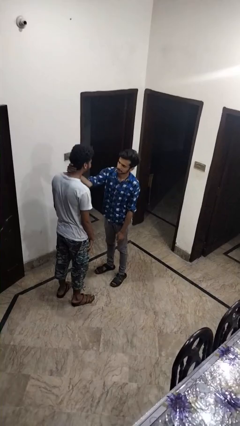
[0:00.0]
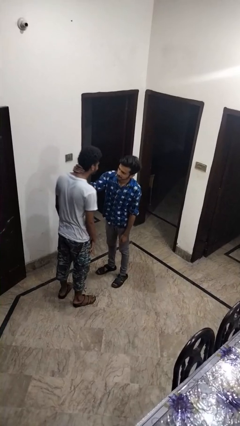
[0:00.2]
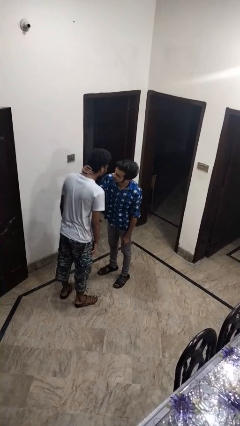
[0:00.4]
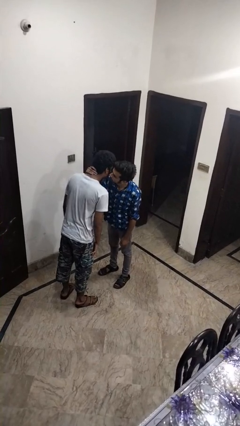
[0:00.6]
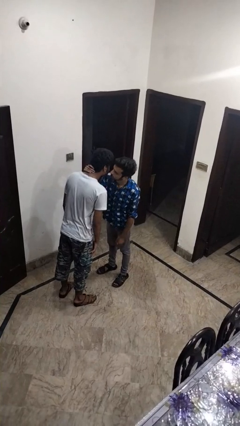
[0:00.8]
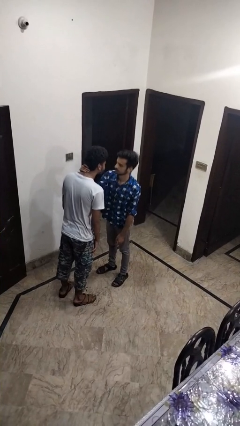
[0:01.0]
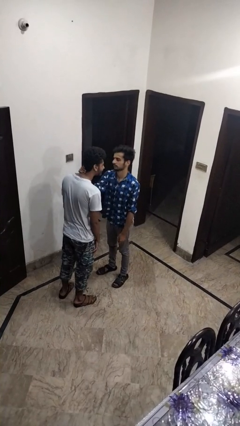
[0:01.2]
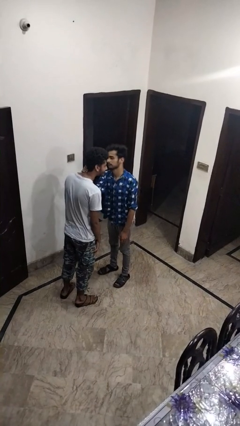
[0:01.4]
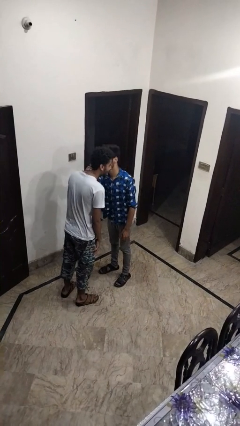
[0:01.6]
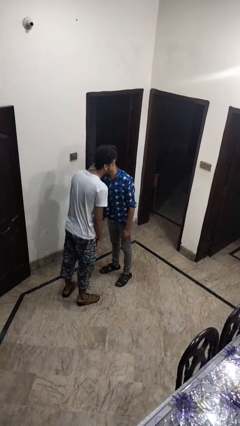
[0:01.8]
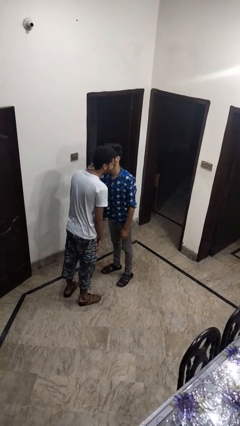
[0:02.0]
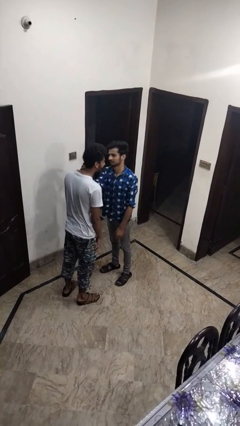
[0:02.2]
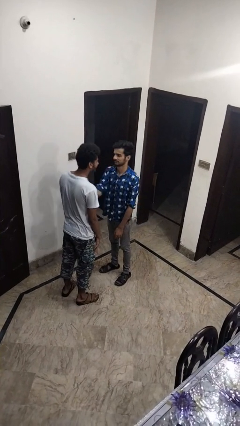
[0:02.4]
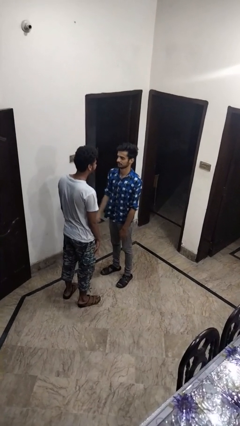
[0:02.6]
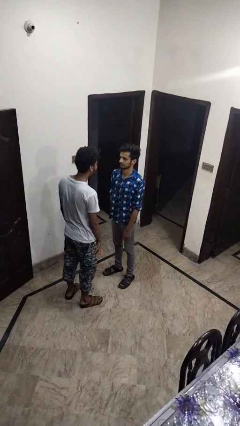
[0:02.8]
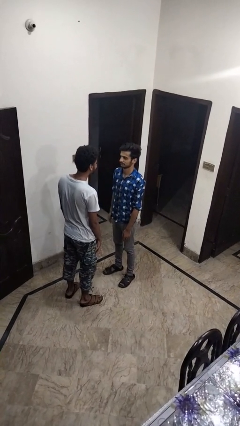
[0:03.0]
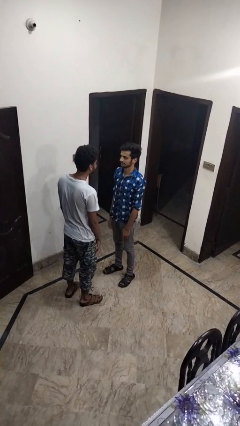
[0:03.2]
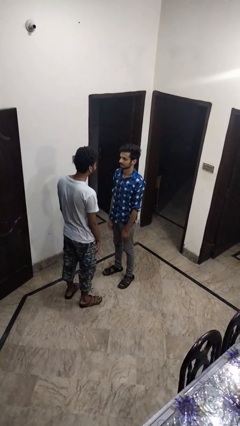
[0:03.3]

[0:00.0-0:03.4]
person kisses cheek of person

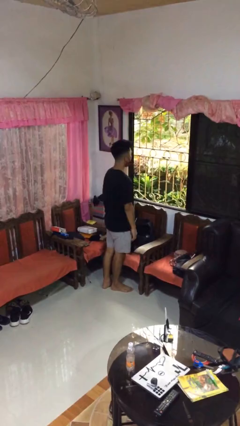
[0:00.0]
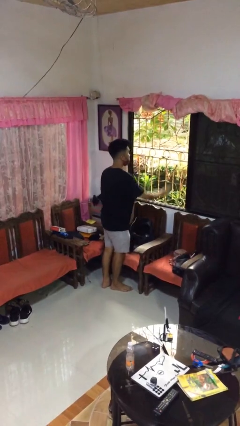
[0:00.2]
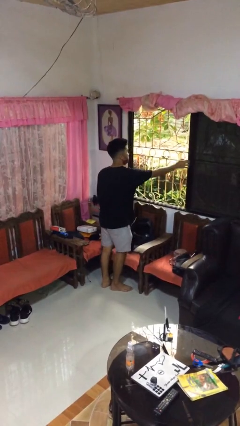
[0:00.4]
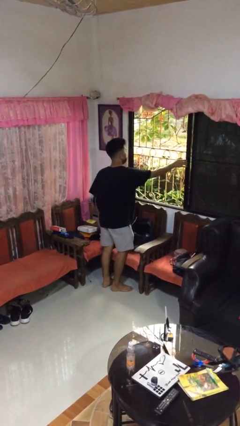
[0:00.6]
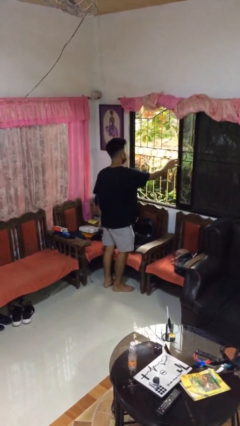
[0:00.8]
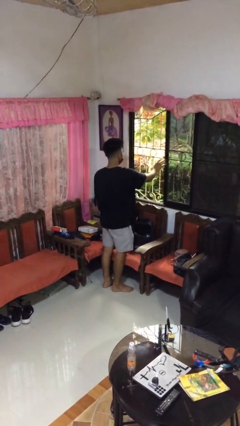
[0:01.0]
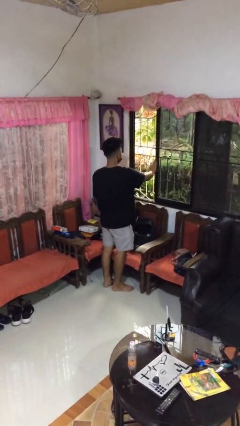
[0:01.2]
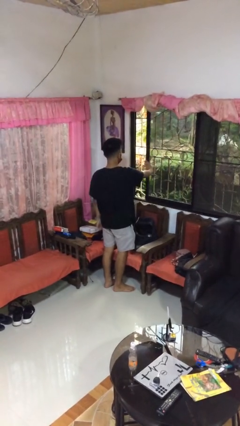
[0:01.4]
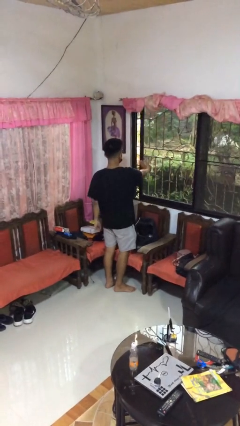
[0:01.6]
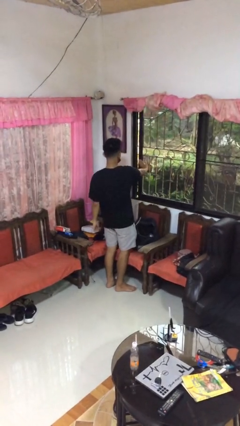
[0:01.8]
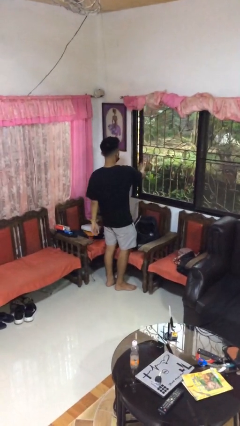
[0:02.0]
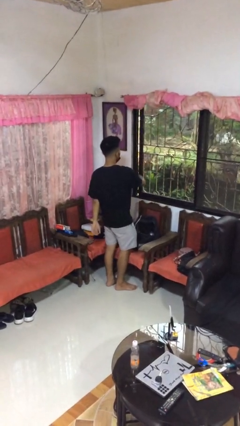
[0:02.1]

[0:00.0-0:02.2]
person closes home window

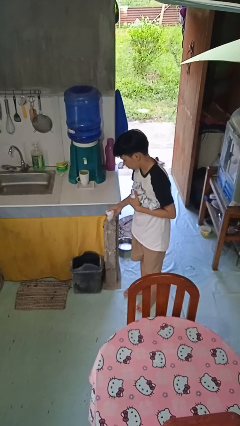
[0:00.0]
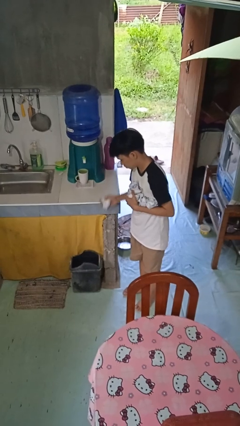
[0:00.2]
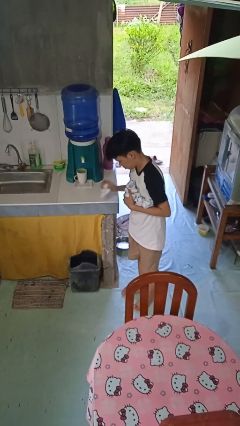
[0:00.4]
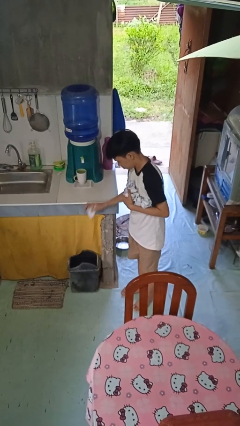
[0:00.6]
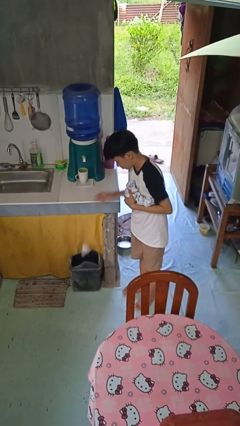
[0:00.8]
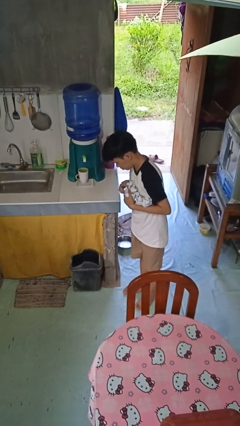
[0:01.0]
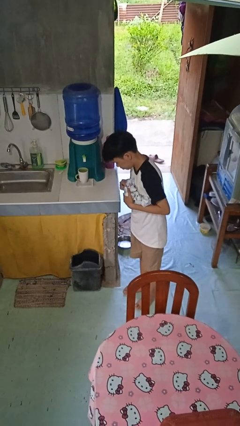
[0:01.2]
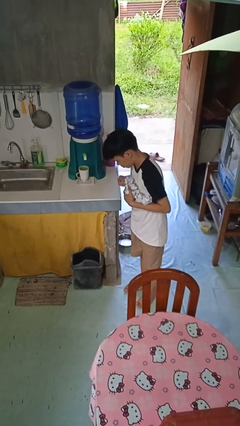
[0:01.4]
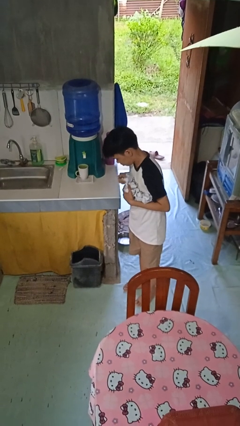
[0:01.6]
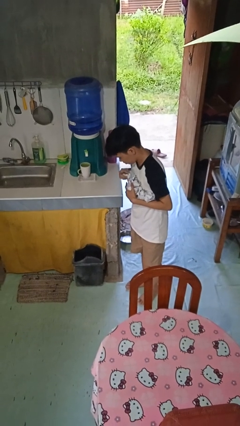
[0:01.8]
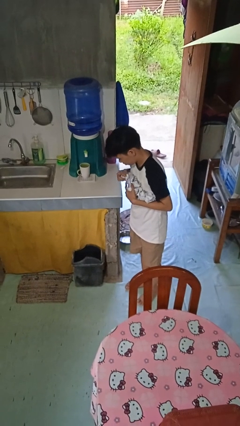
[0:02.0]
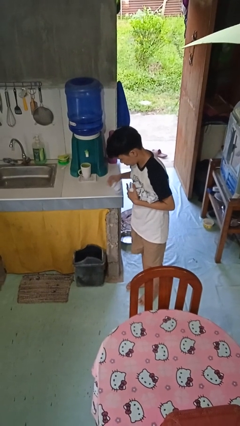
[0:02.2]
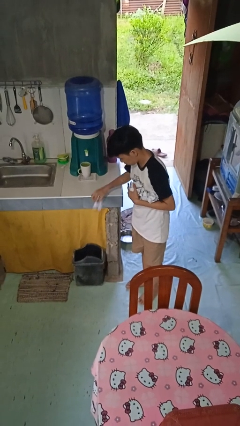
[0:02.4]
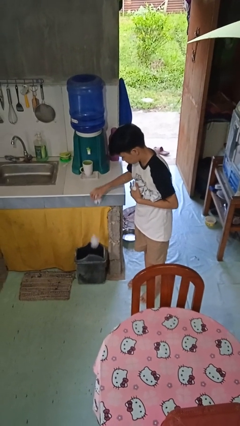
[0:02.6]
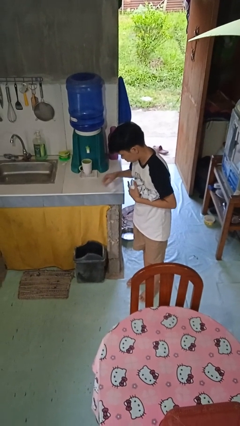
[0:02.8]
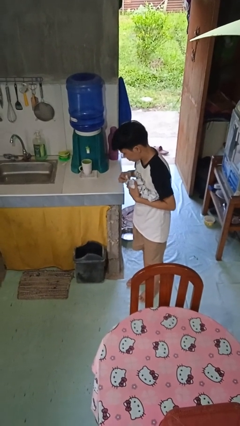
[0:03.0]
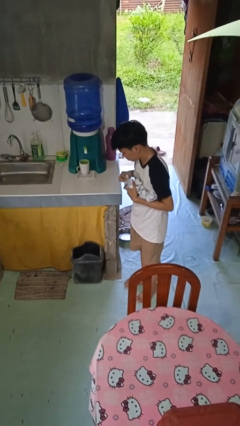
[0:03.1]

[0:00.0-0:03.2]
person discards trash

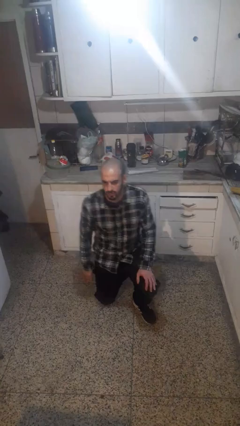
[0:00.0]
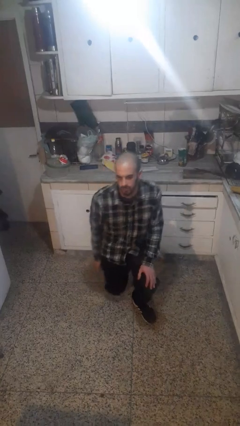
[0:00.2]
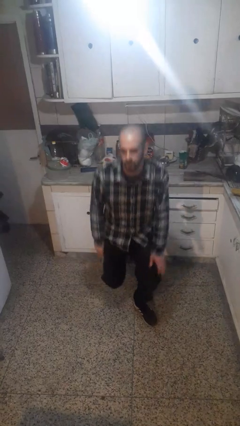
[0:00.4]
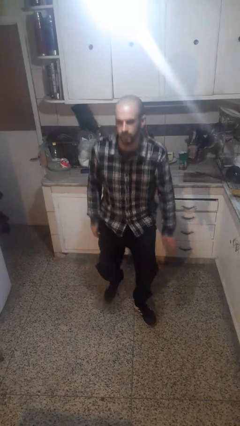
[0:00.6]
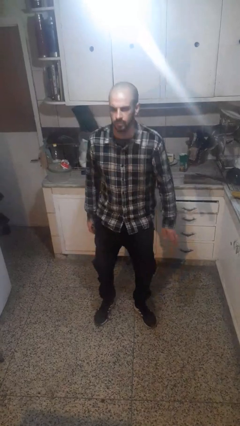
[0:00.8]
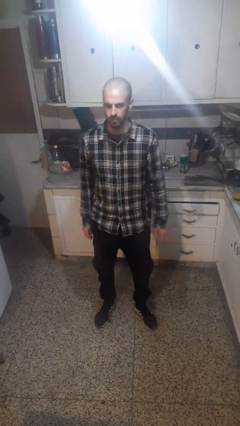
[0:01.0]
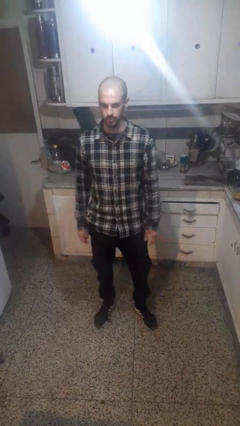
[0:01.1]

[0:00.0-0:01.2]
person stands up from floor

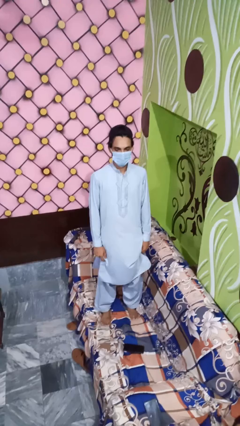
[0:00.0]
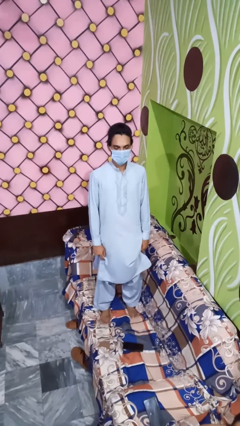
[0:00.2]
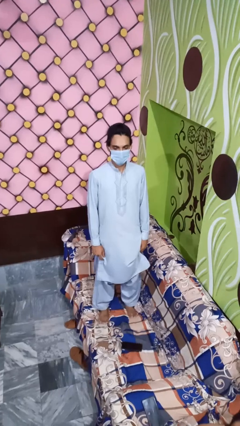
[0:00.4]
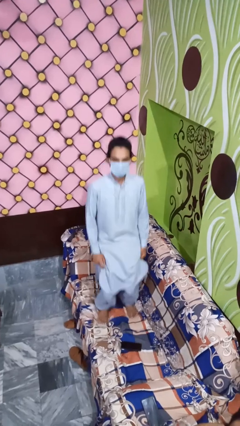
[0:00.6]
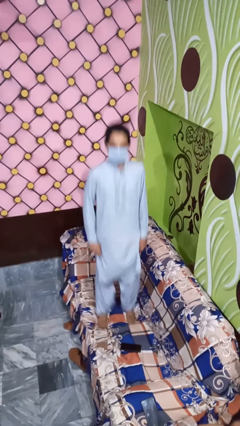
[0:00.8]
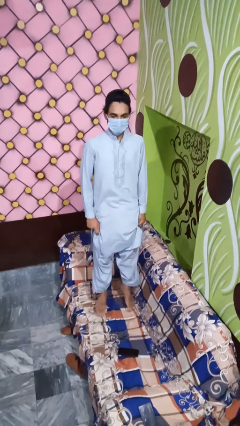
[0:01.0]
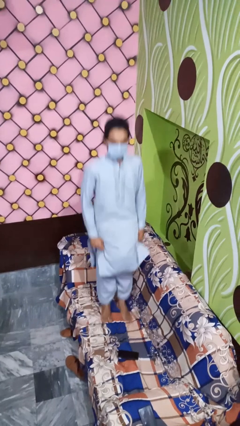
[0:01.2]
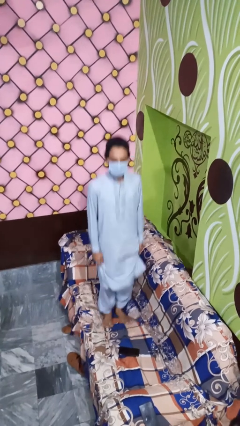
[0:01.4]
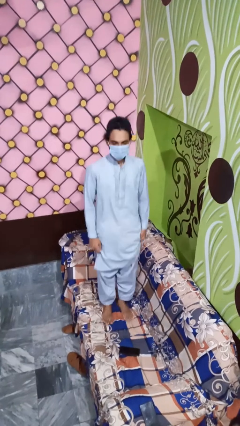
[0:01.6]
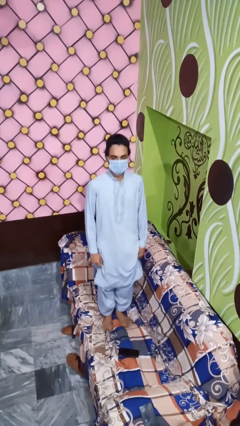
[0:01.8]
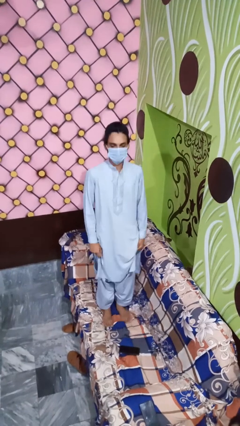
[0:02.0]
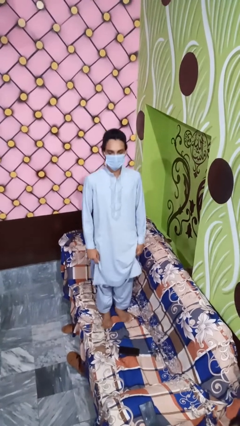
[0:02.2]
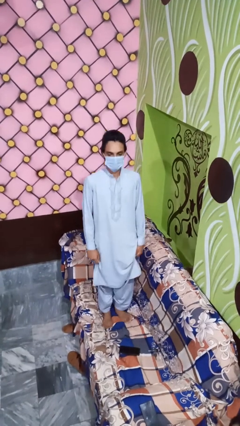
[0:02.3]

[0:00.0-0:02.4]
person jumps on couch

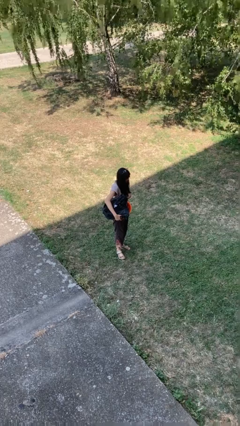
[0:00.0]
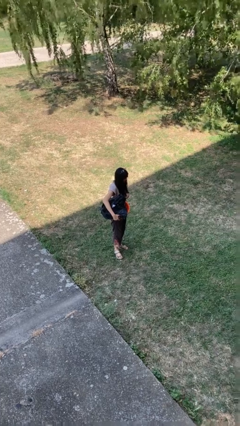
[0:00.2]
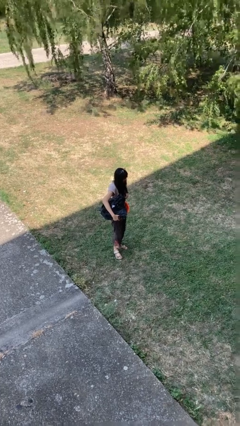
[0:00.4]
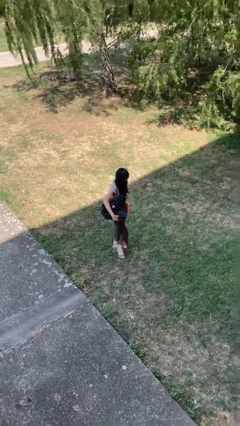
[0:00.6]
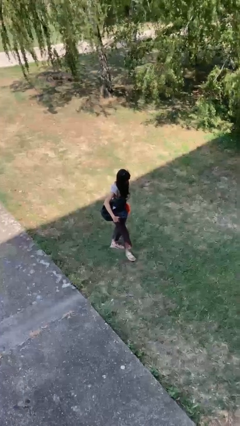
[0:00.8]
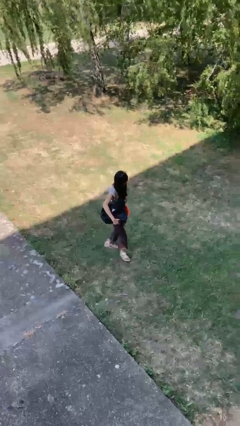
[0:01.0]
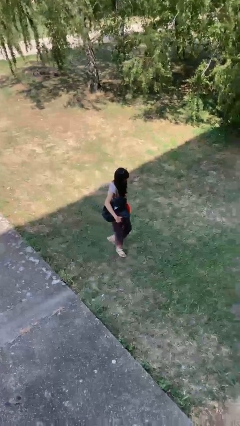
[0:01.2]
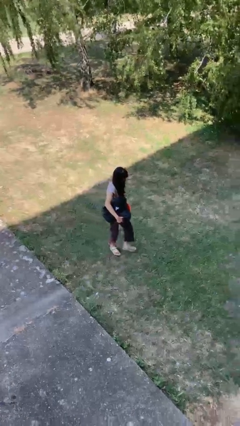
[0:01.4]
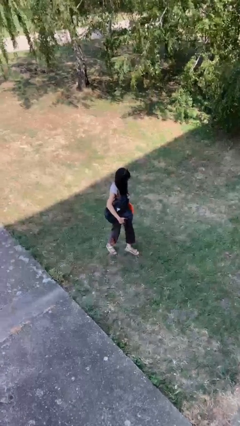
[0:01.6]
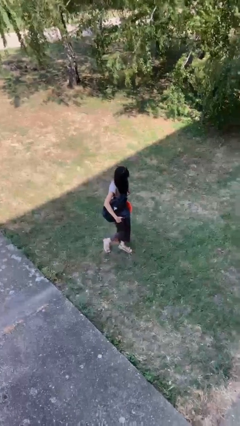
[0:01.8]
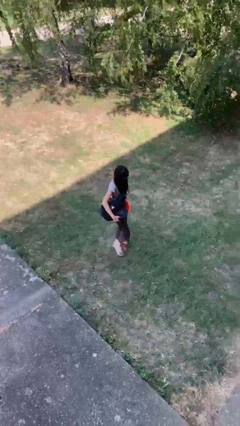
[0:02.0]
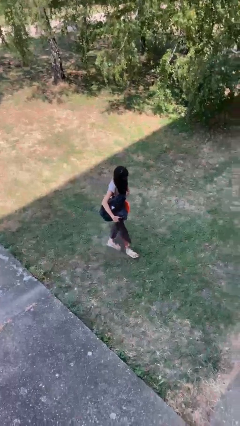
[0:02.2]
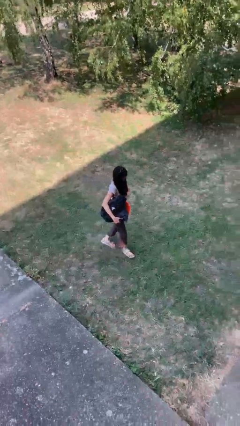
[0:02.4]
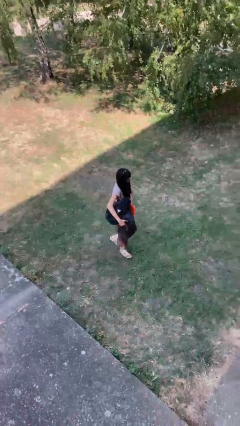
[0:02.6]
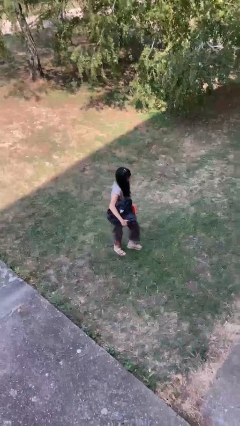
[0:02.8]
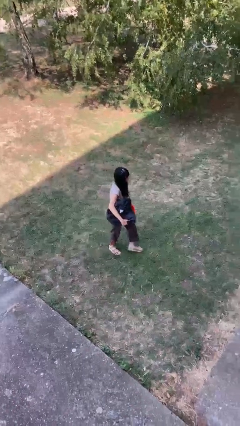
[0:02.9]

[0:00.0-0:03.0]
person carries laundry basket

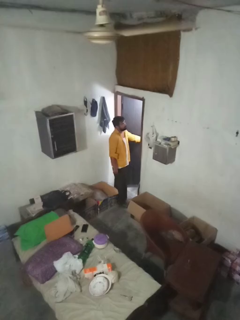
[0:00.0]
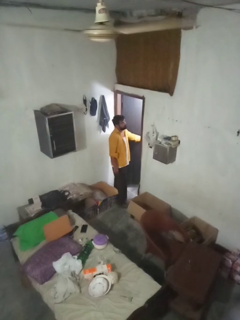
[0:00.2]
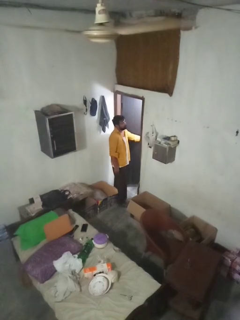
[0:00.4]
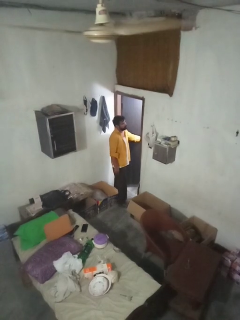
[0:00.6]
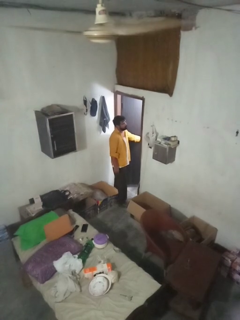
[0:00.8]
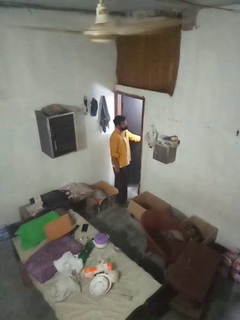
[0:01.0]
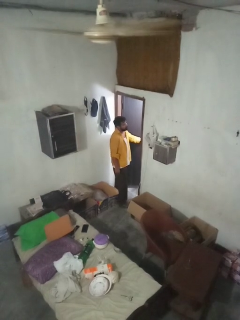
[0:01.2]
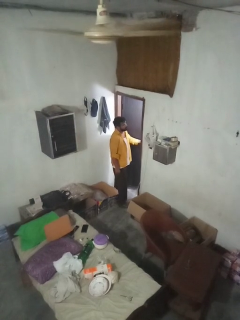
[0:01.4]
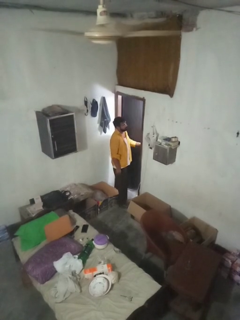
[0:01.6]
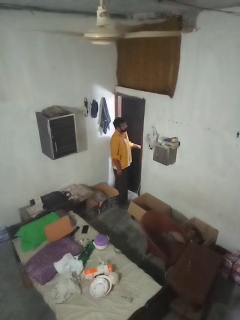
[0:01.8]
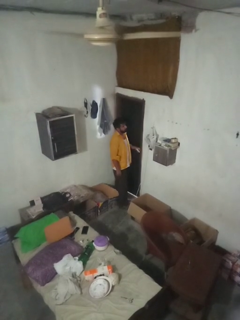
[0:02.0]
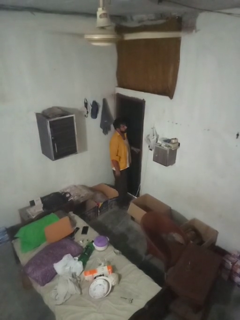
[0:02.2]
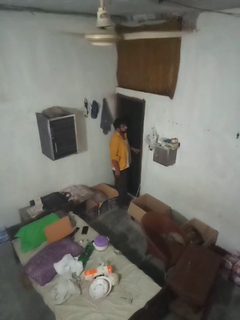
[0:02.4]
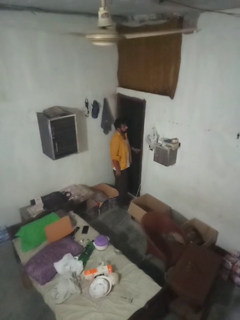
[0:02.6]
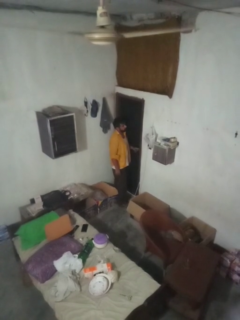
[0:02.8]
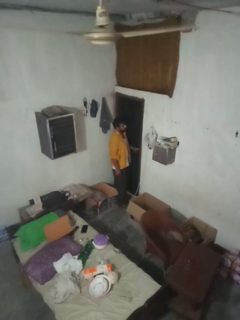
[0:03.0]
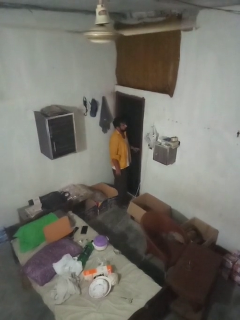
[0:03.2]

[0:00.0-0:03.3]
person closes facility door
